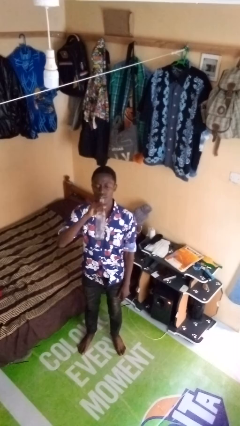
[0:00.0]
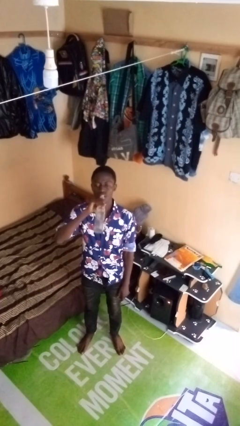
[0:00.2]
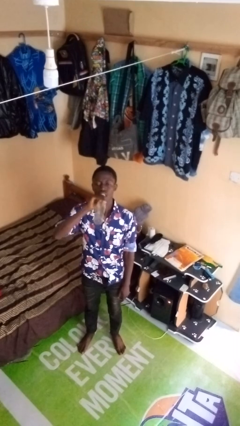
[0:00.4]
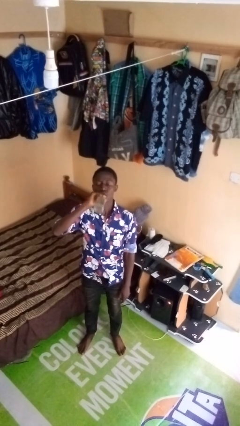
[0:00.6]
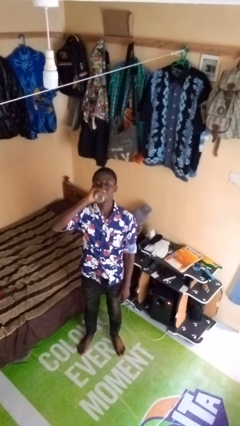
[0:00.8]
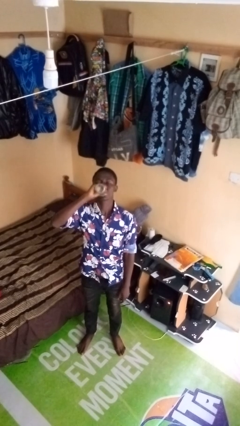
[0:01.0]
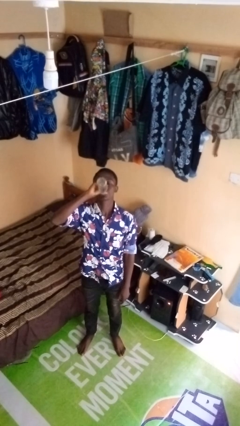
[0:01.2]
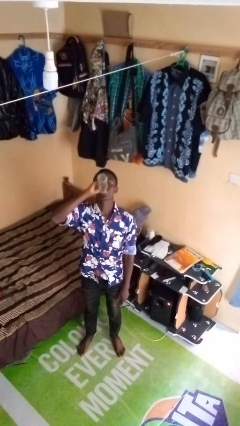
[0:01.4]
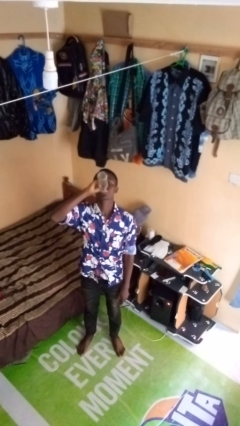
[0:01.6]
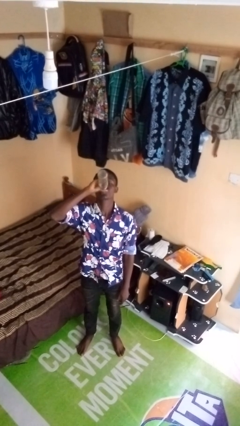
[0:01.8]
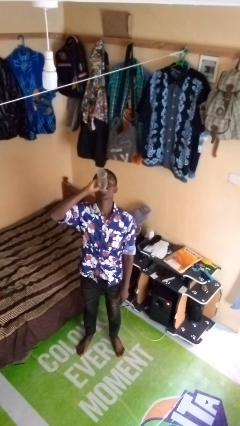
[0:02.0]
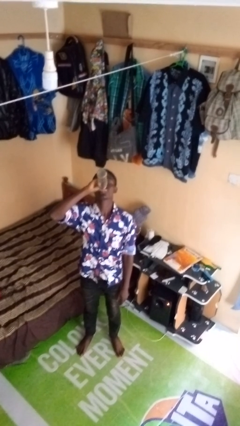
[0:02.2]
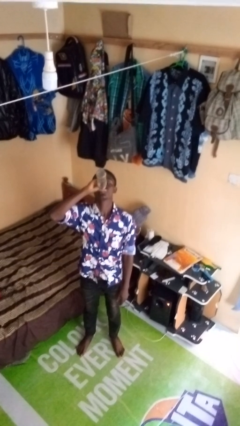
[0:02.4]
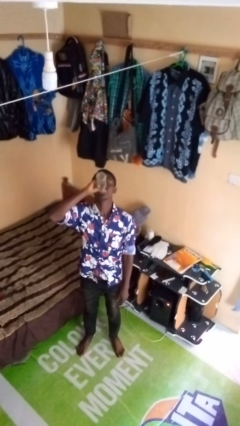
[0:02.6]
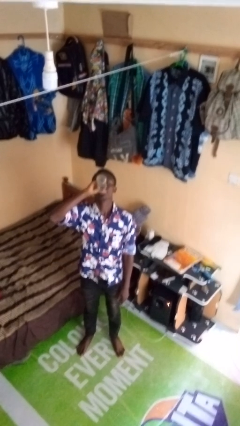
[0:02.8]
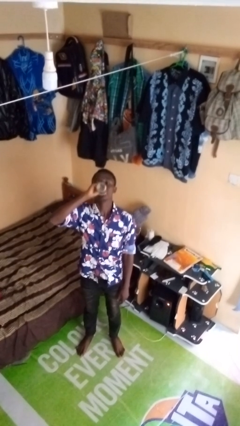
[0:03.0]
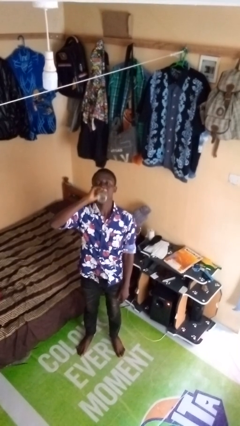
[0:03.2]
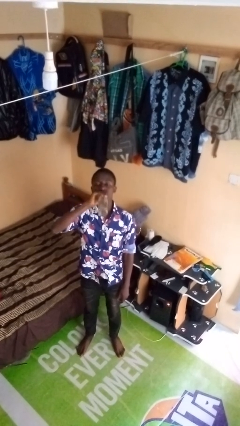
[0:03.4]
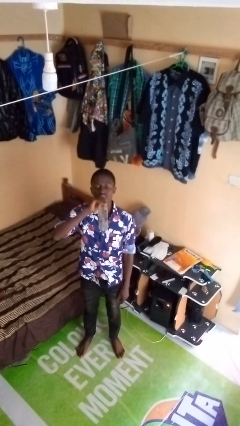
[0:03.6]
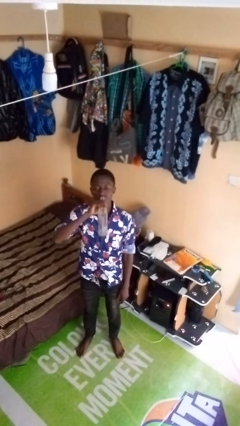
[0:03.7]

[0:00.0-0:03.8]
person drinks from bottle

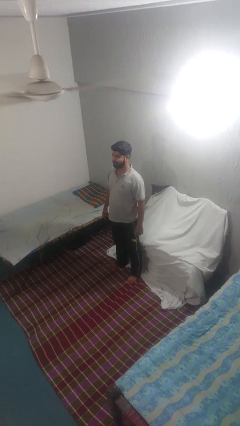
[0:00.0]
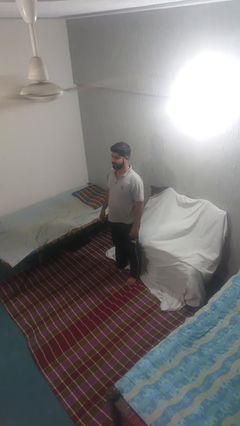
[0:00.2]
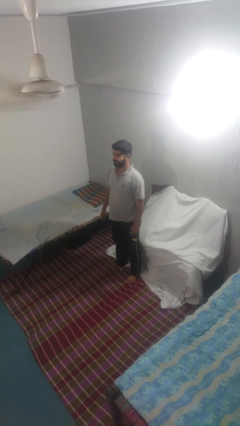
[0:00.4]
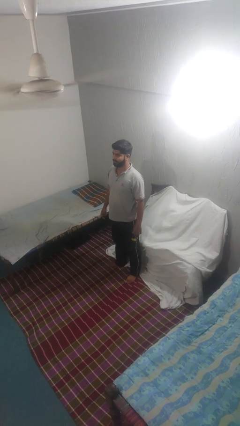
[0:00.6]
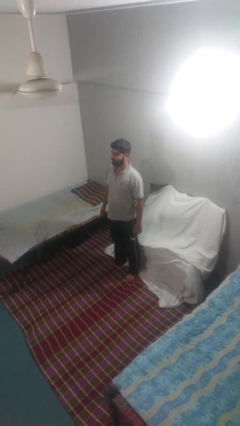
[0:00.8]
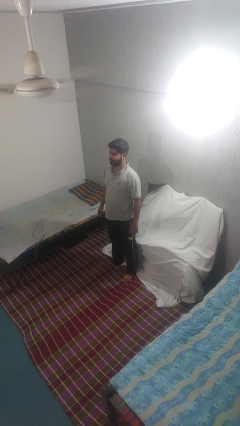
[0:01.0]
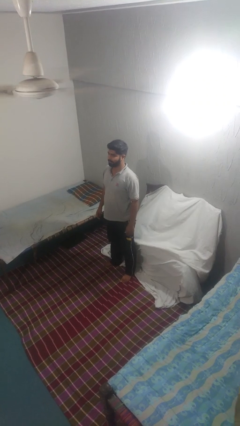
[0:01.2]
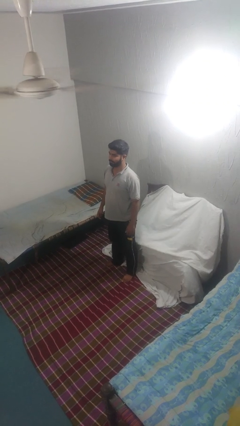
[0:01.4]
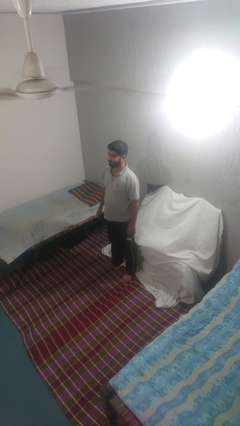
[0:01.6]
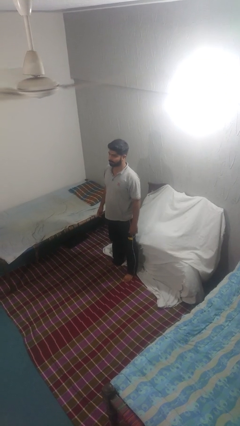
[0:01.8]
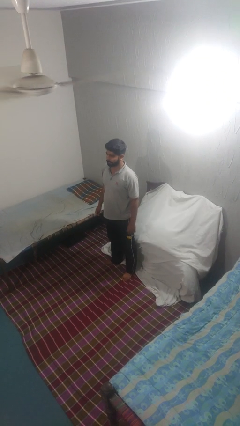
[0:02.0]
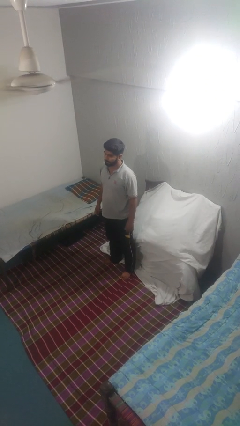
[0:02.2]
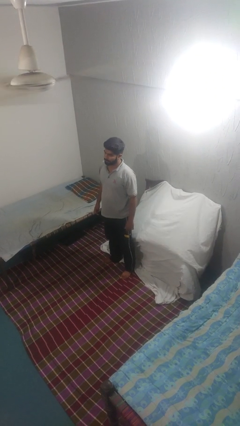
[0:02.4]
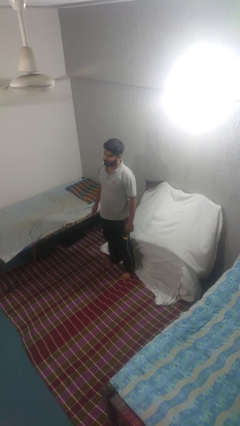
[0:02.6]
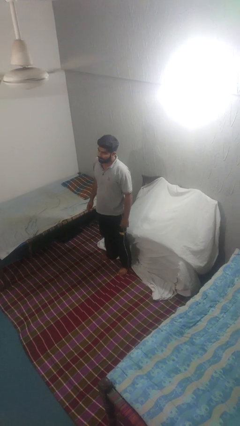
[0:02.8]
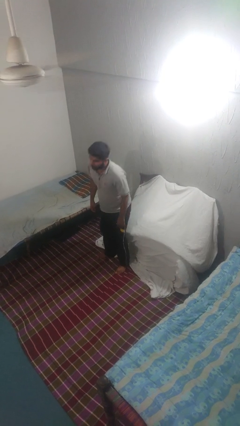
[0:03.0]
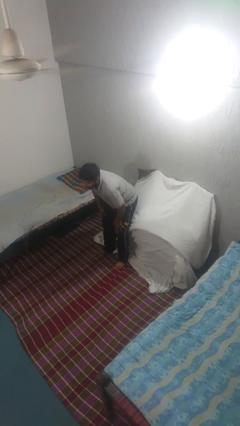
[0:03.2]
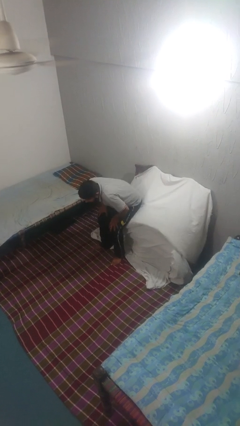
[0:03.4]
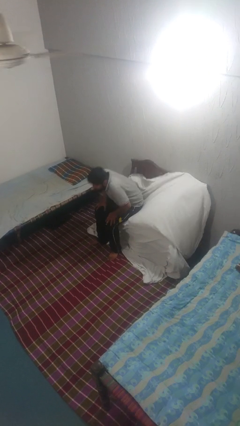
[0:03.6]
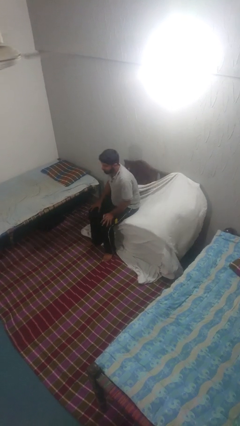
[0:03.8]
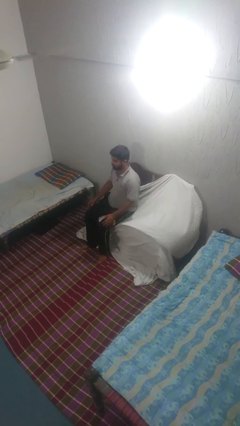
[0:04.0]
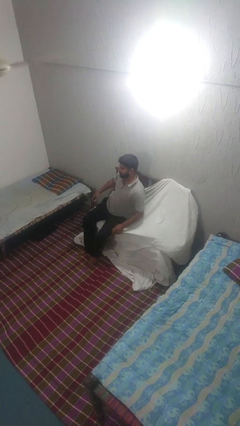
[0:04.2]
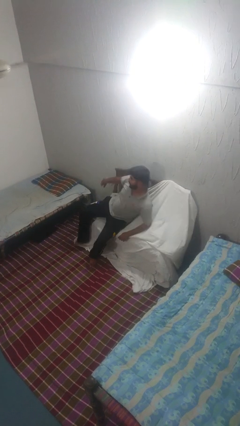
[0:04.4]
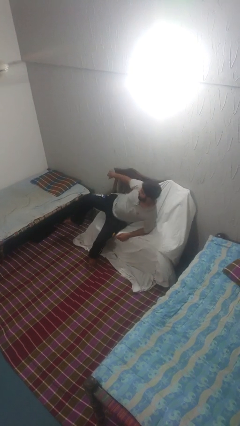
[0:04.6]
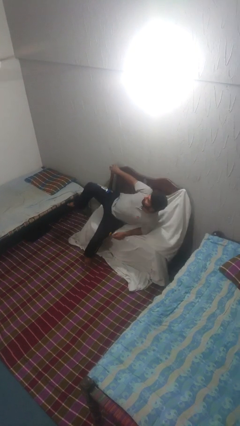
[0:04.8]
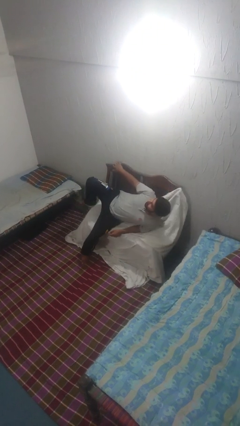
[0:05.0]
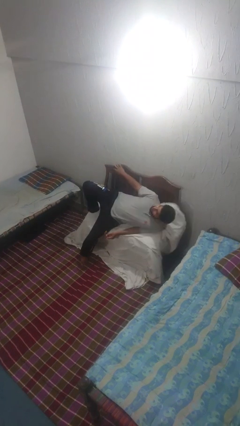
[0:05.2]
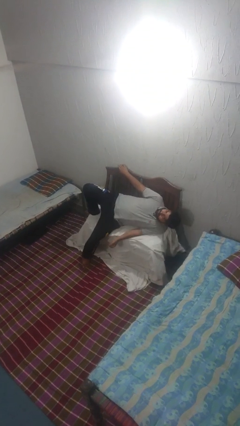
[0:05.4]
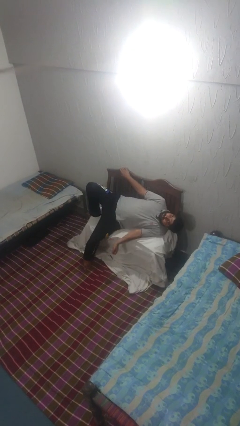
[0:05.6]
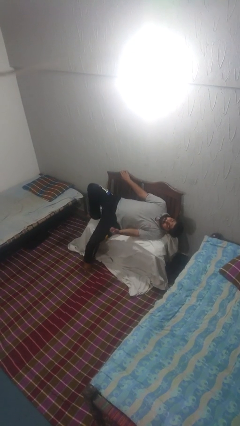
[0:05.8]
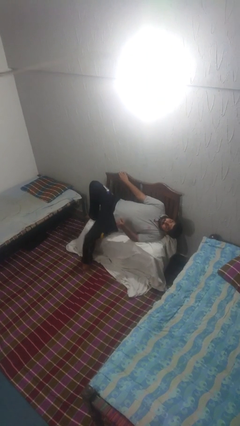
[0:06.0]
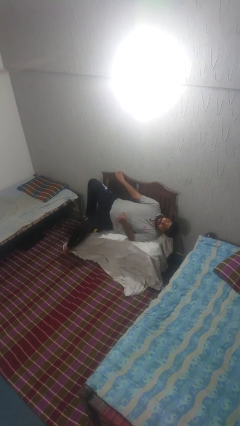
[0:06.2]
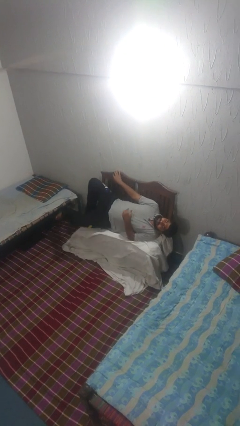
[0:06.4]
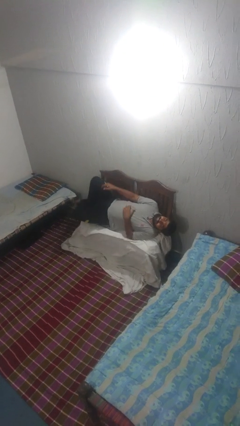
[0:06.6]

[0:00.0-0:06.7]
person lies down on couch

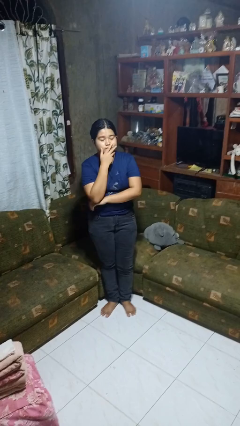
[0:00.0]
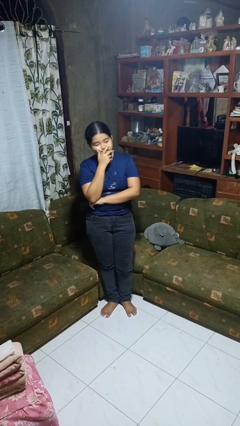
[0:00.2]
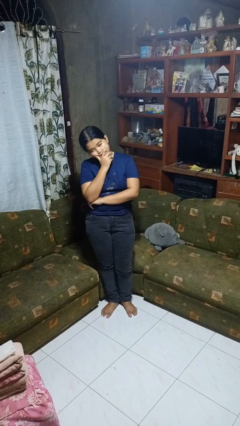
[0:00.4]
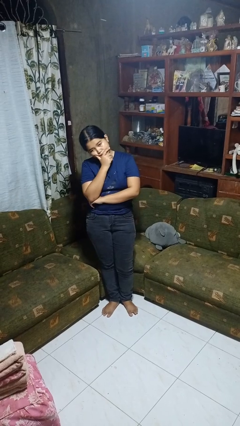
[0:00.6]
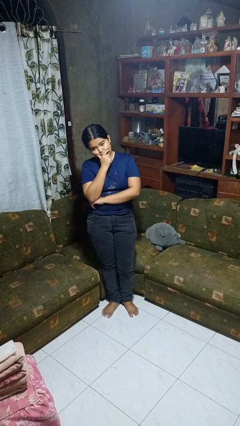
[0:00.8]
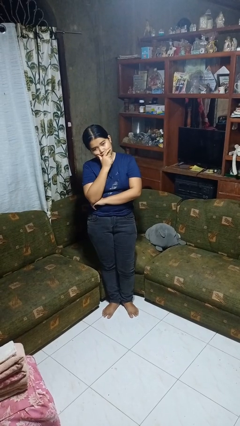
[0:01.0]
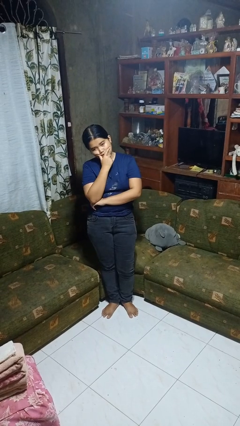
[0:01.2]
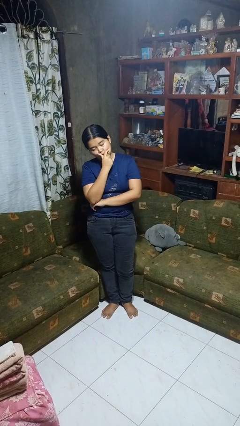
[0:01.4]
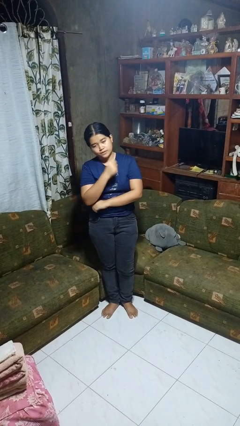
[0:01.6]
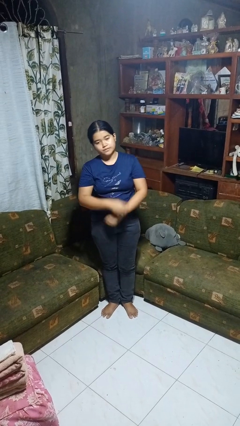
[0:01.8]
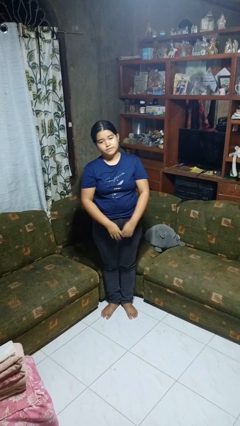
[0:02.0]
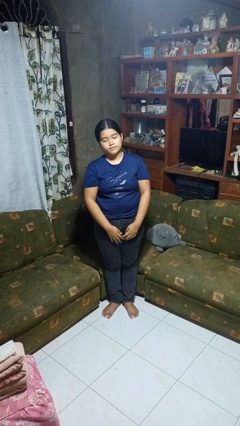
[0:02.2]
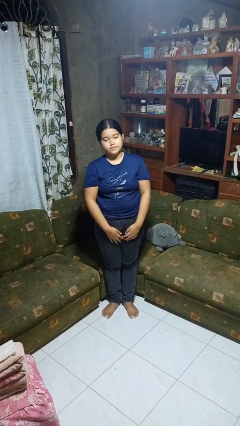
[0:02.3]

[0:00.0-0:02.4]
person strokes chin

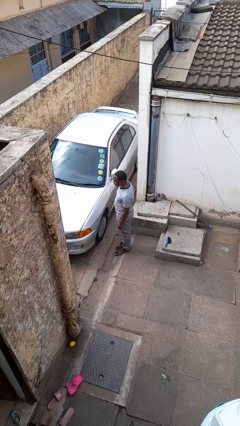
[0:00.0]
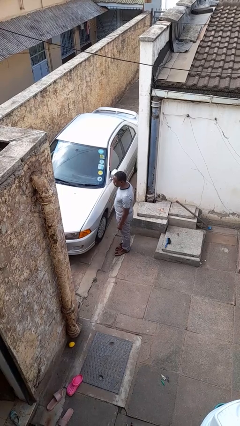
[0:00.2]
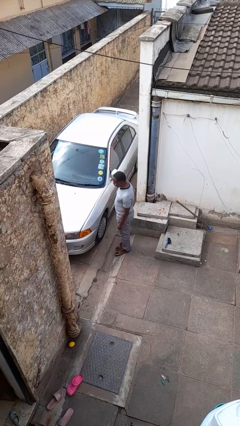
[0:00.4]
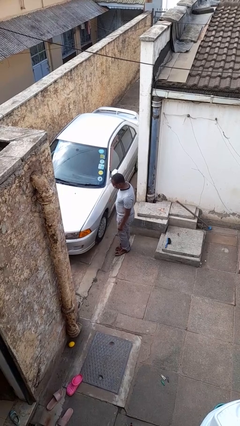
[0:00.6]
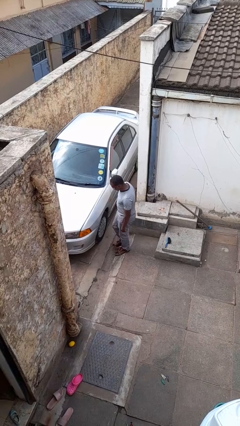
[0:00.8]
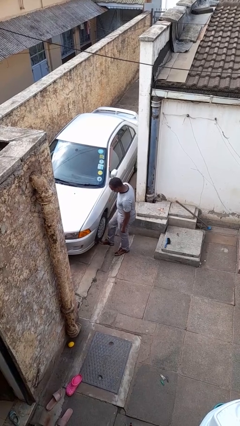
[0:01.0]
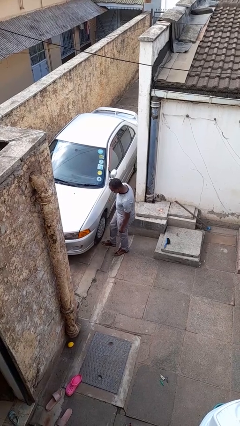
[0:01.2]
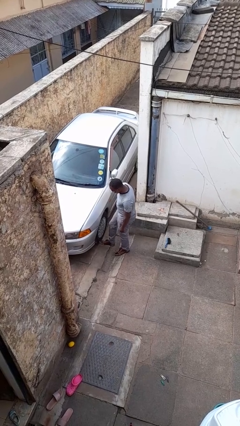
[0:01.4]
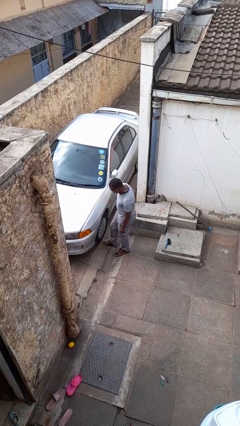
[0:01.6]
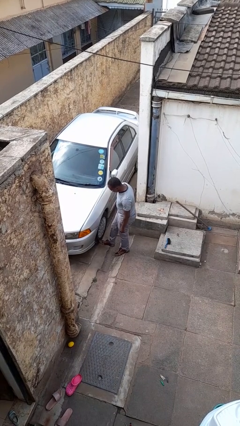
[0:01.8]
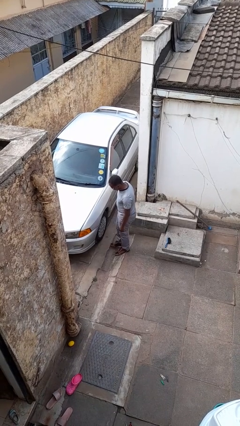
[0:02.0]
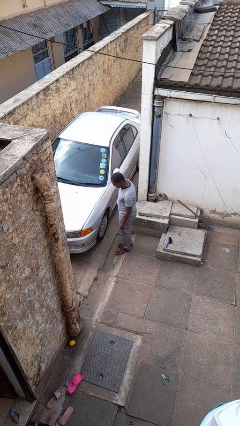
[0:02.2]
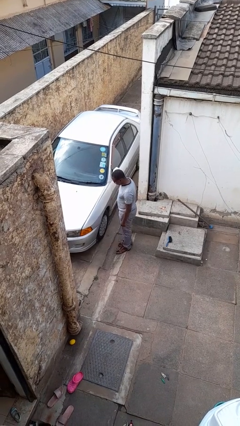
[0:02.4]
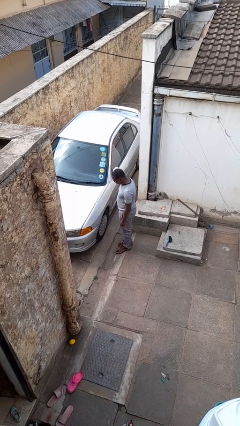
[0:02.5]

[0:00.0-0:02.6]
person kicks car tires

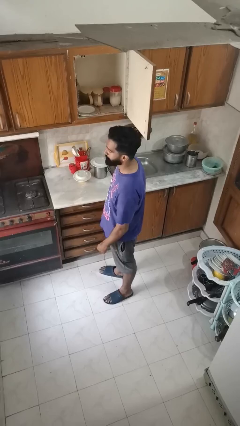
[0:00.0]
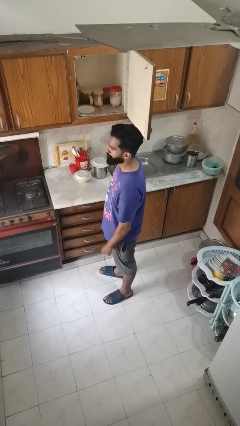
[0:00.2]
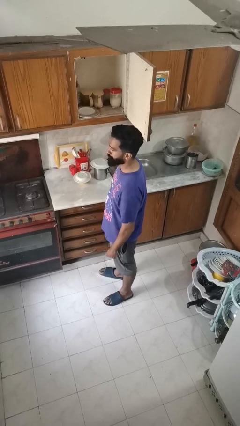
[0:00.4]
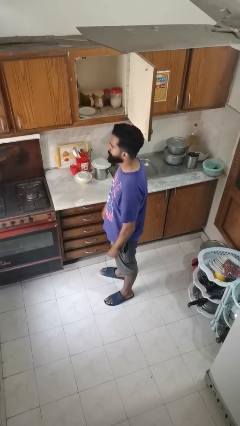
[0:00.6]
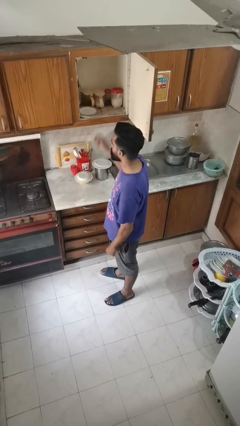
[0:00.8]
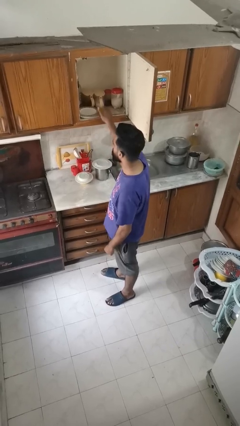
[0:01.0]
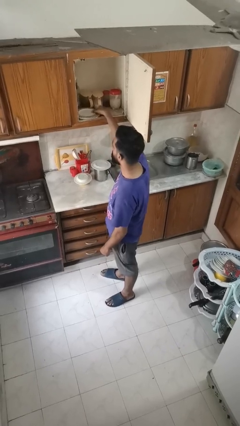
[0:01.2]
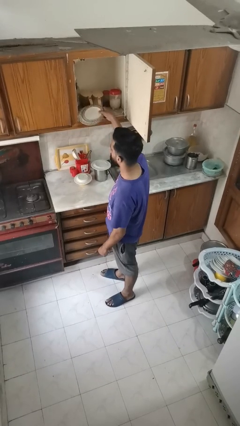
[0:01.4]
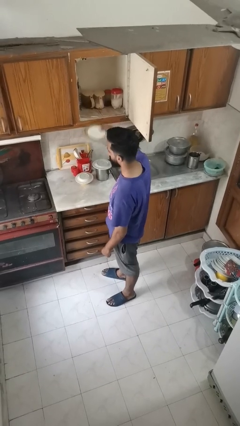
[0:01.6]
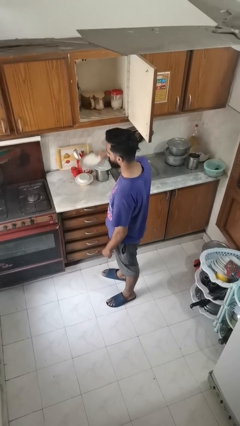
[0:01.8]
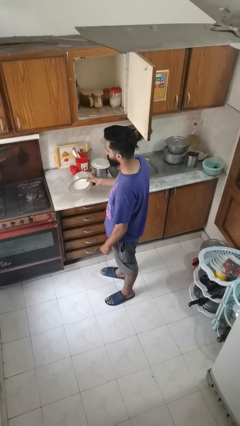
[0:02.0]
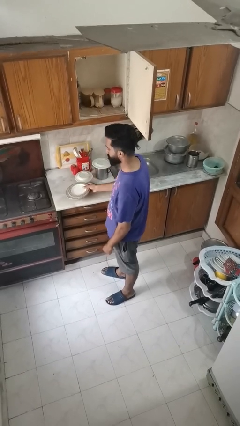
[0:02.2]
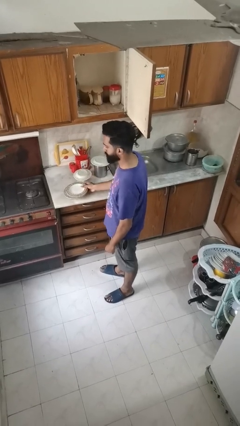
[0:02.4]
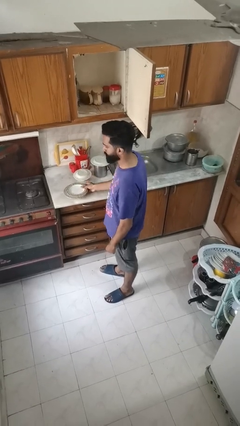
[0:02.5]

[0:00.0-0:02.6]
person takes object from cabinet
